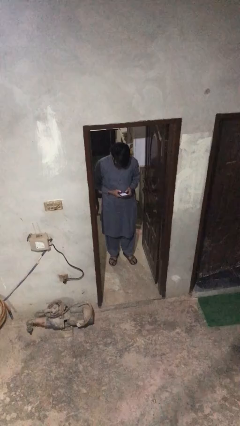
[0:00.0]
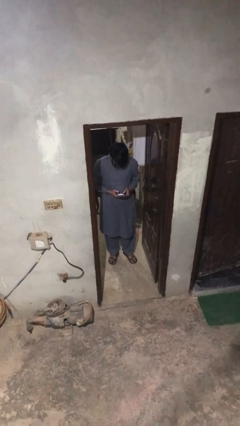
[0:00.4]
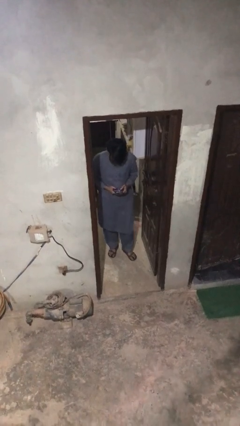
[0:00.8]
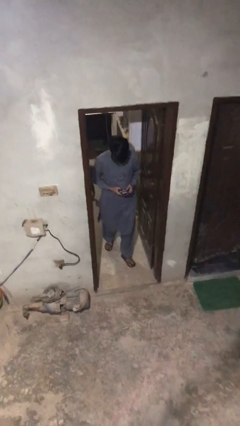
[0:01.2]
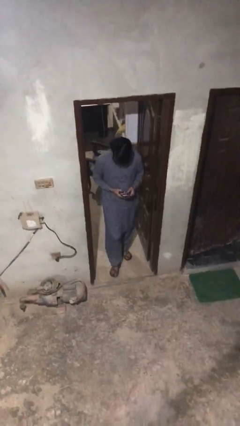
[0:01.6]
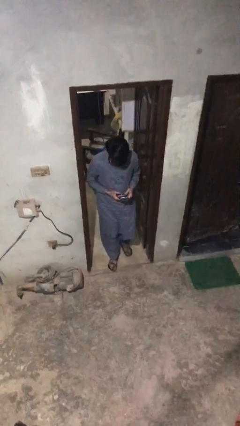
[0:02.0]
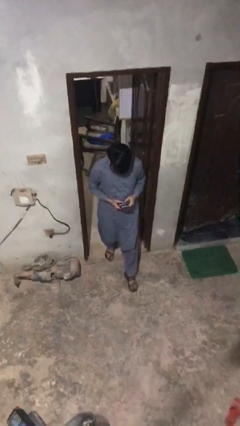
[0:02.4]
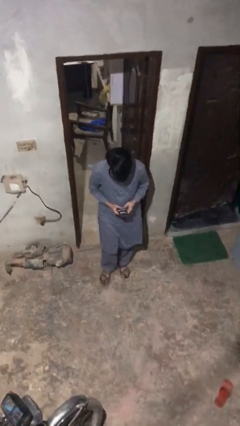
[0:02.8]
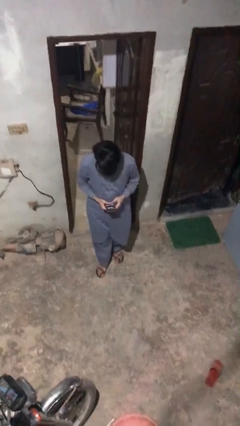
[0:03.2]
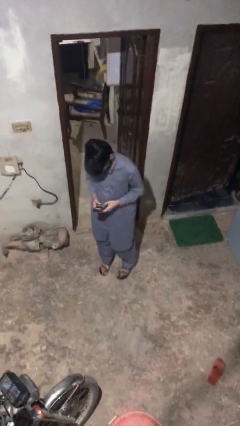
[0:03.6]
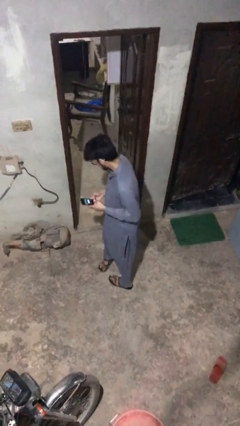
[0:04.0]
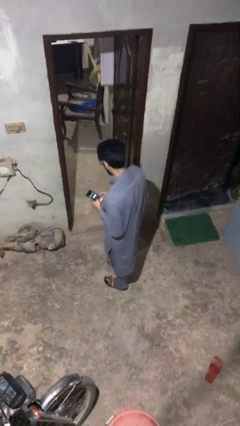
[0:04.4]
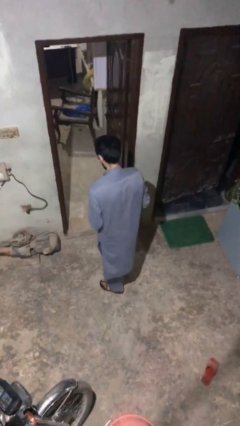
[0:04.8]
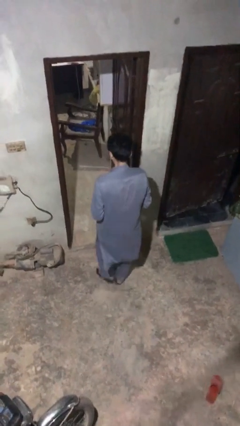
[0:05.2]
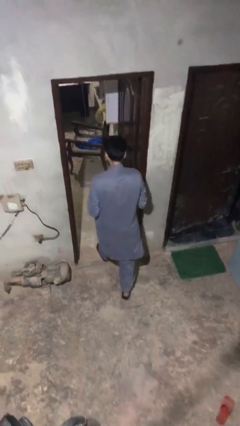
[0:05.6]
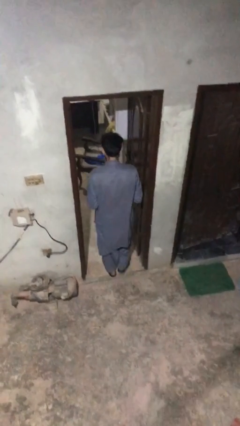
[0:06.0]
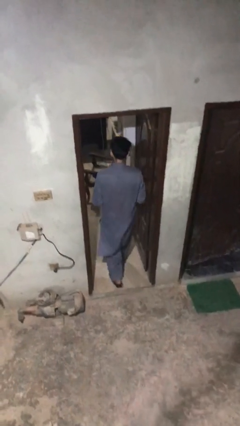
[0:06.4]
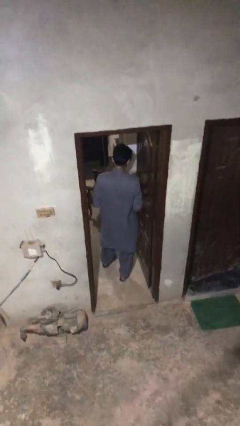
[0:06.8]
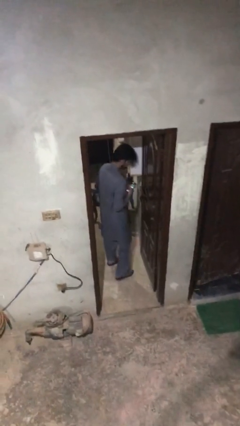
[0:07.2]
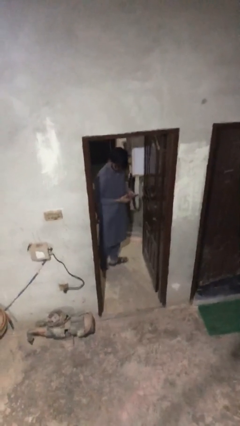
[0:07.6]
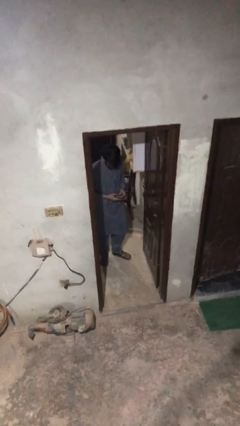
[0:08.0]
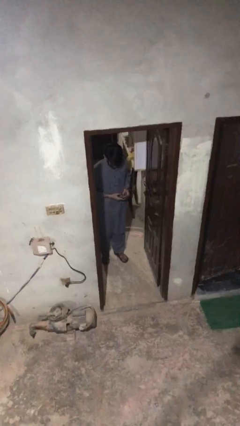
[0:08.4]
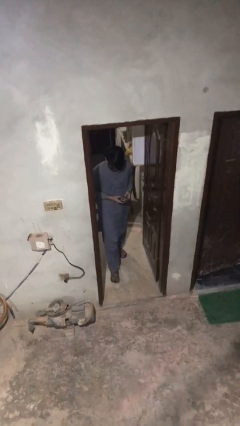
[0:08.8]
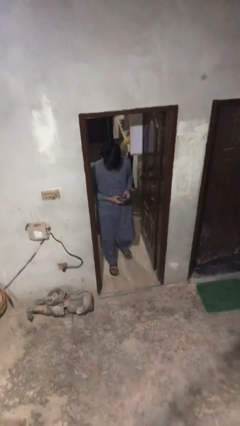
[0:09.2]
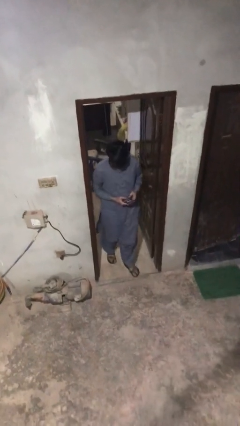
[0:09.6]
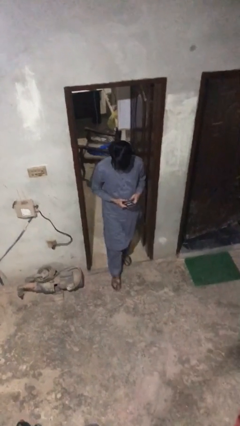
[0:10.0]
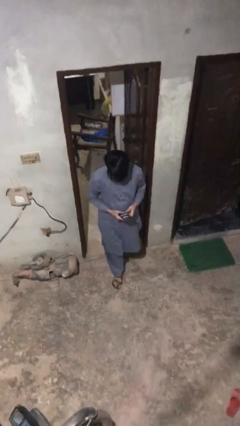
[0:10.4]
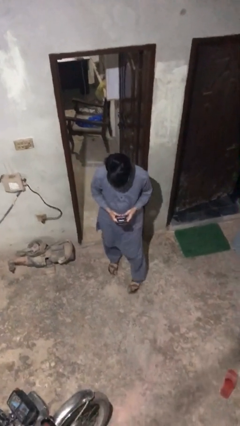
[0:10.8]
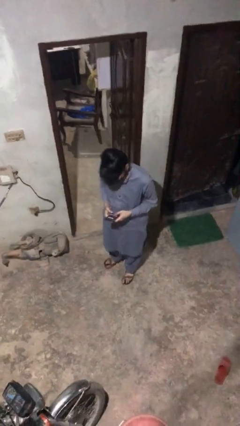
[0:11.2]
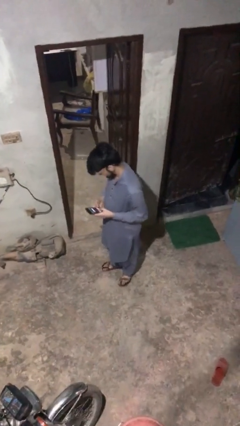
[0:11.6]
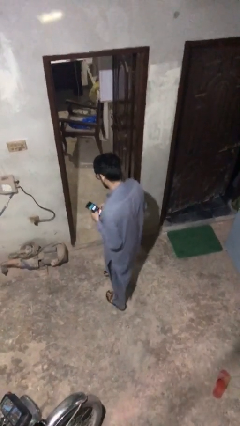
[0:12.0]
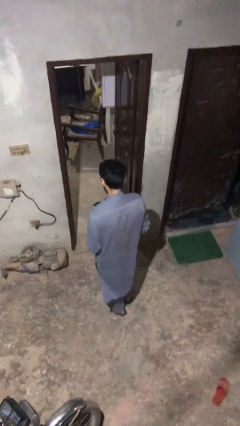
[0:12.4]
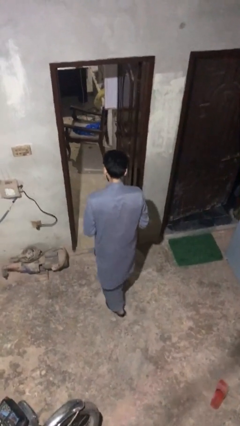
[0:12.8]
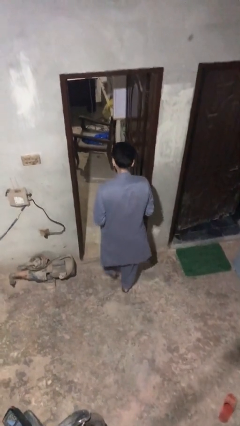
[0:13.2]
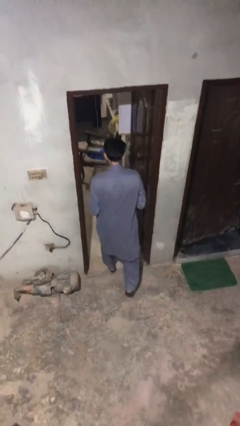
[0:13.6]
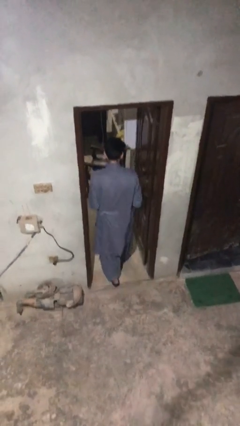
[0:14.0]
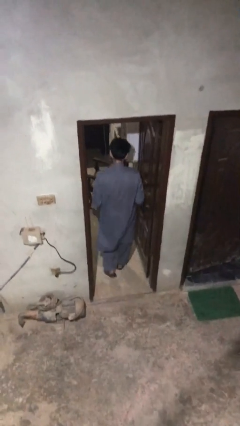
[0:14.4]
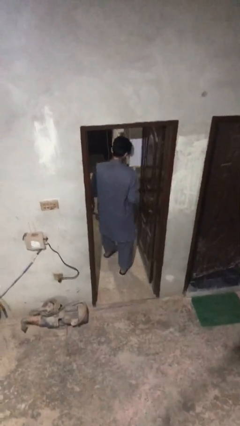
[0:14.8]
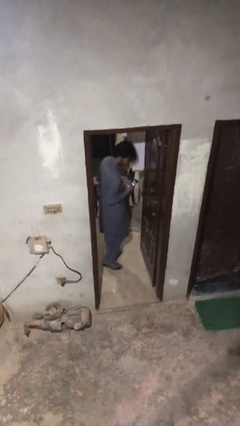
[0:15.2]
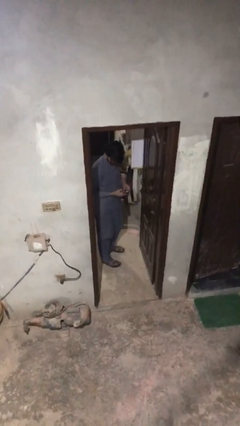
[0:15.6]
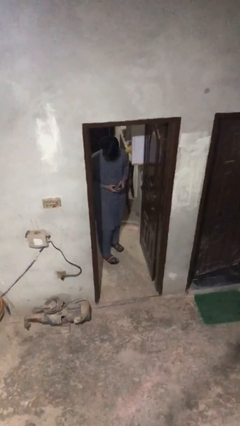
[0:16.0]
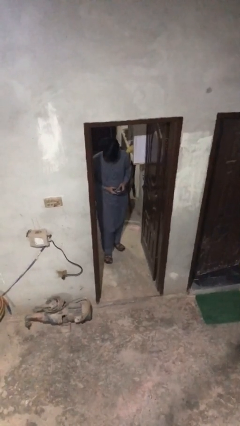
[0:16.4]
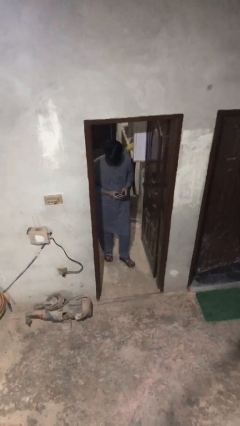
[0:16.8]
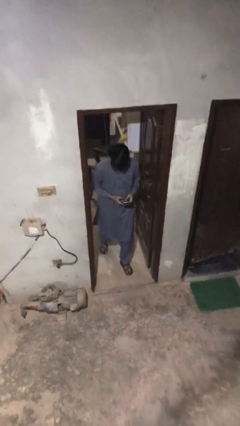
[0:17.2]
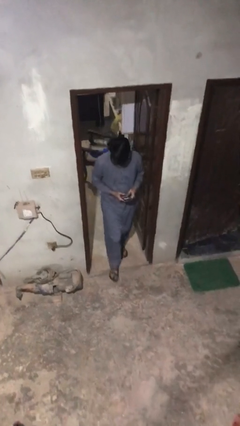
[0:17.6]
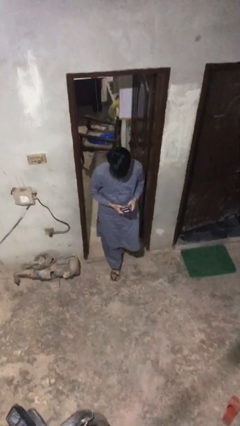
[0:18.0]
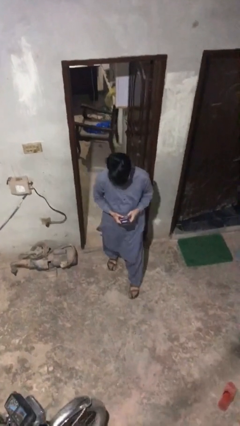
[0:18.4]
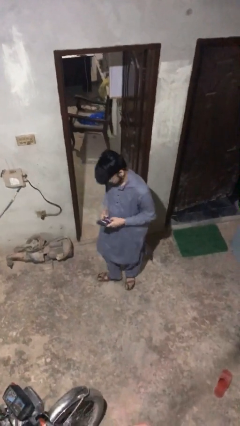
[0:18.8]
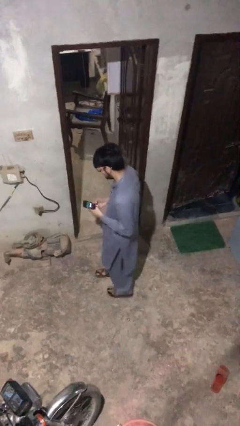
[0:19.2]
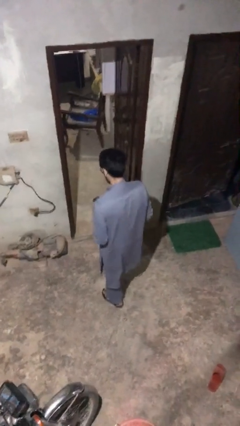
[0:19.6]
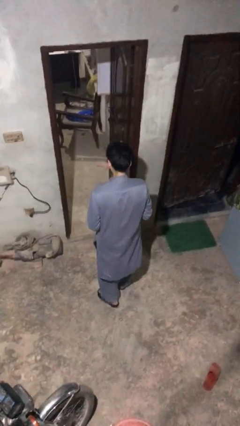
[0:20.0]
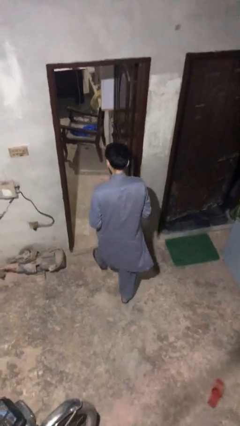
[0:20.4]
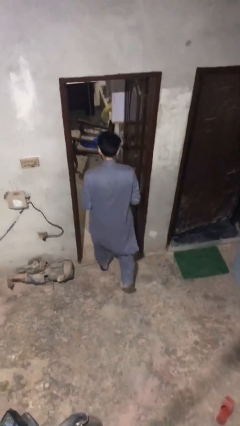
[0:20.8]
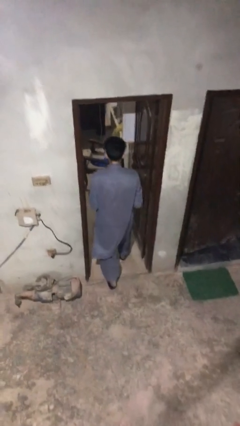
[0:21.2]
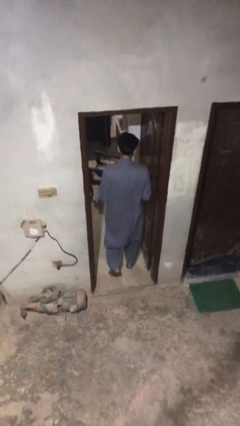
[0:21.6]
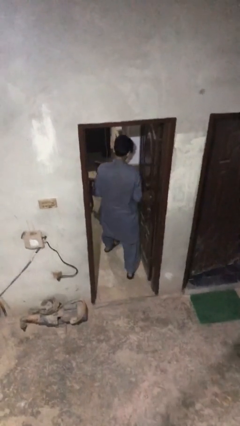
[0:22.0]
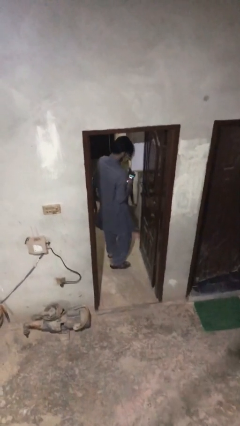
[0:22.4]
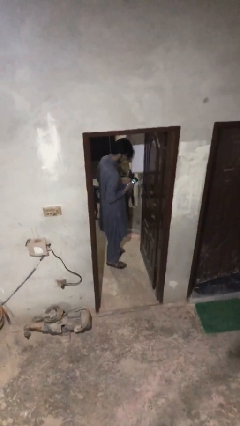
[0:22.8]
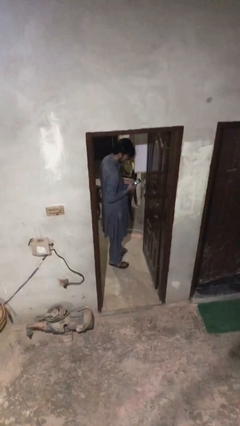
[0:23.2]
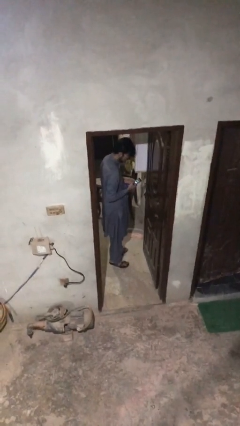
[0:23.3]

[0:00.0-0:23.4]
person texts on phone

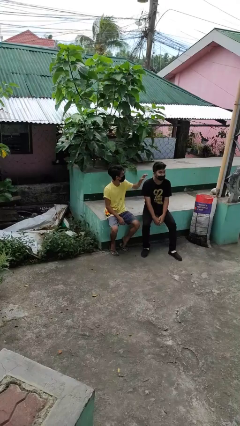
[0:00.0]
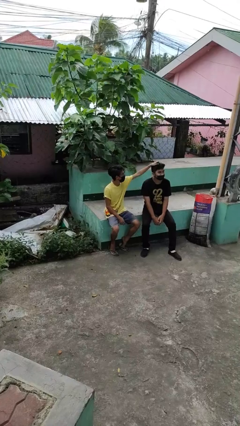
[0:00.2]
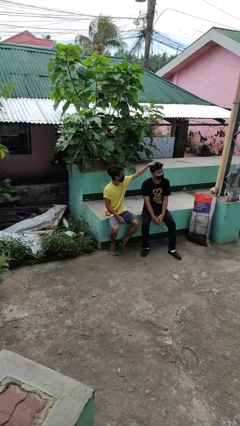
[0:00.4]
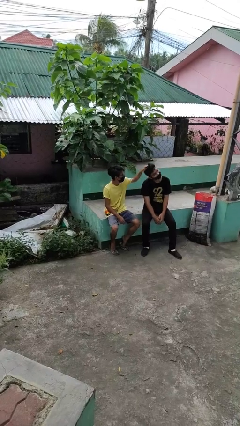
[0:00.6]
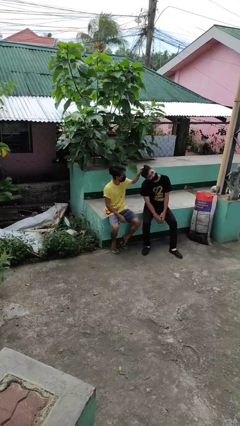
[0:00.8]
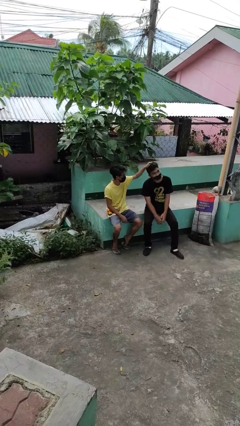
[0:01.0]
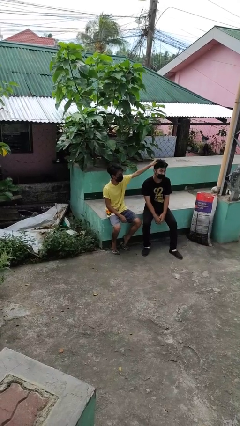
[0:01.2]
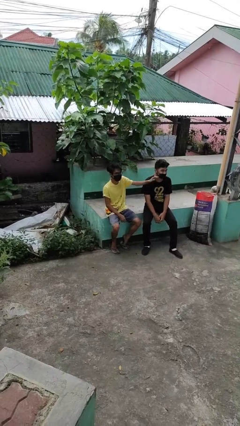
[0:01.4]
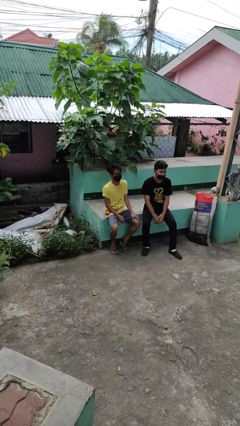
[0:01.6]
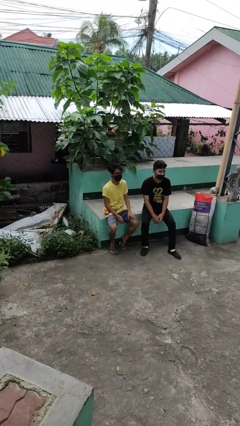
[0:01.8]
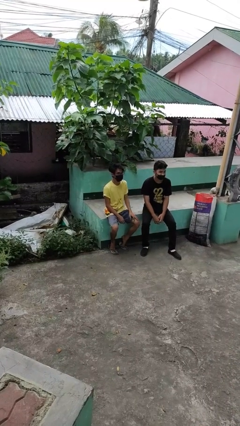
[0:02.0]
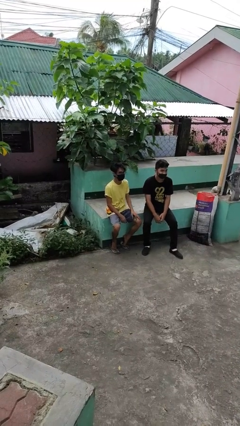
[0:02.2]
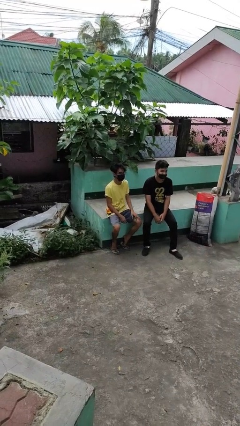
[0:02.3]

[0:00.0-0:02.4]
person grabs person by hair

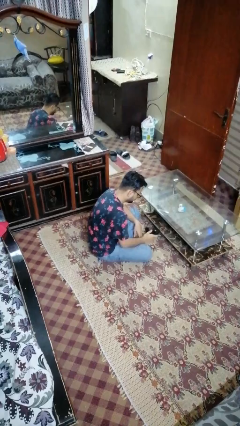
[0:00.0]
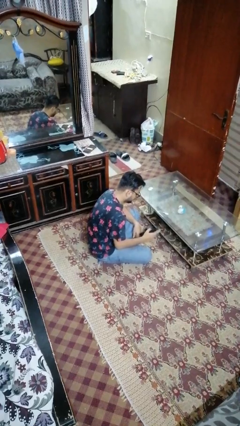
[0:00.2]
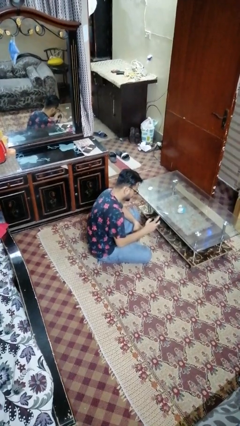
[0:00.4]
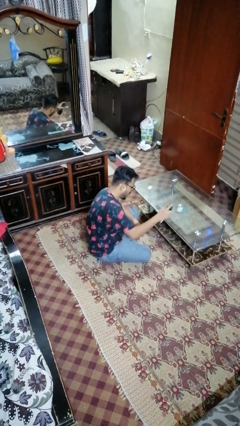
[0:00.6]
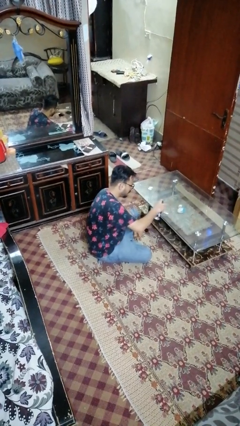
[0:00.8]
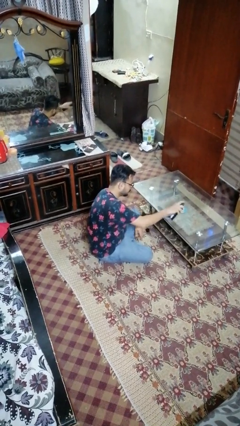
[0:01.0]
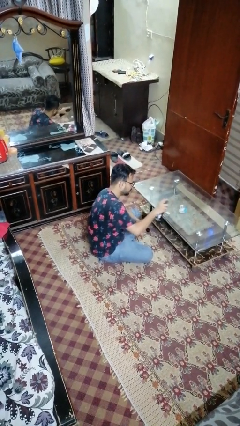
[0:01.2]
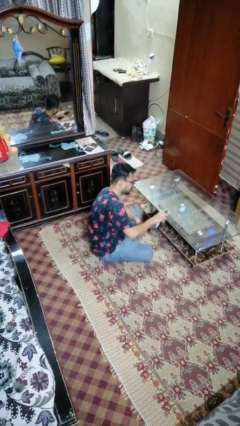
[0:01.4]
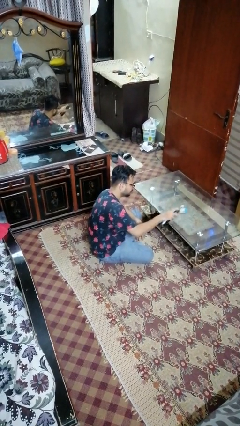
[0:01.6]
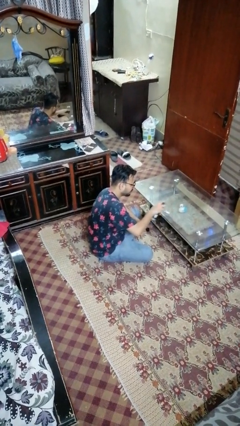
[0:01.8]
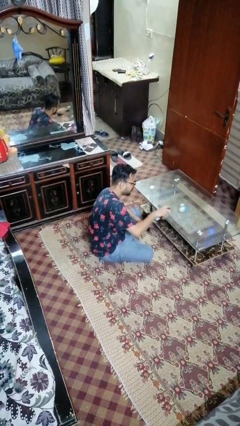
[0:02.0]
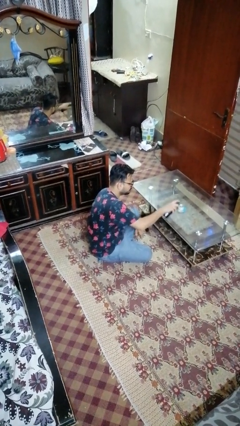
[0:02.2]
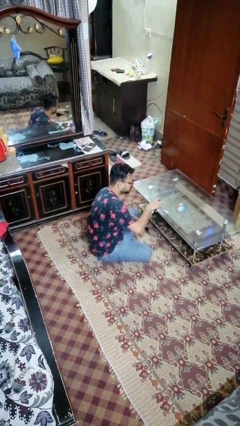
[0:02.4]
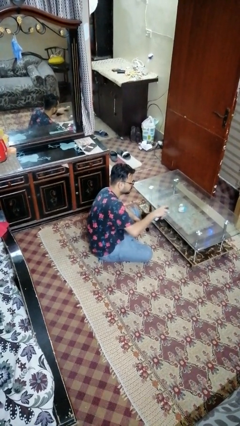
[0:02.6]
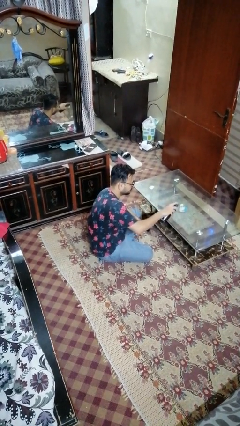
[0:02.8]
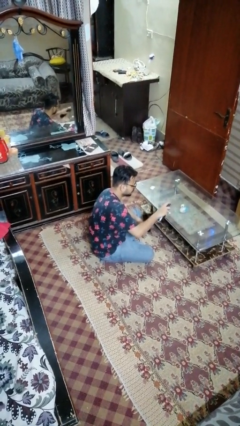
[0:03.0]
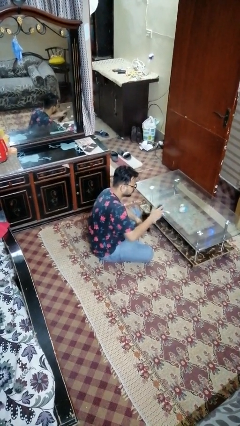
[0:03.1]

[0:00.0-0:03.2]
person sprays from bottle

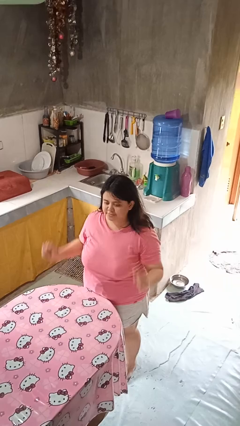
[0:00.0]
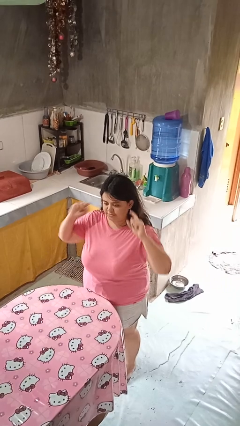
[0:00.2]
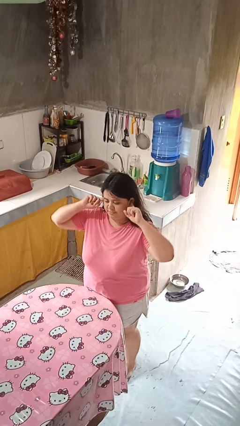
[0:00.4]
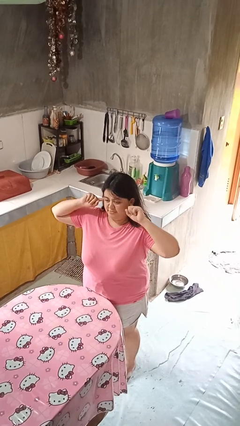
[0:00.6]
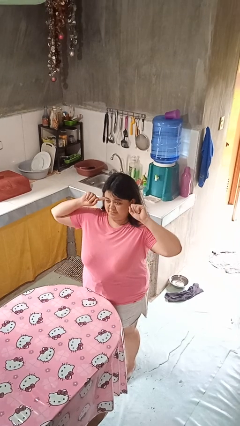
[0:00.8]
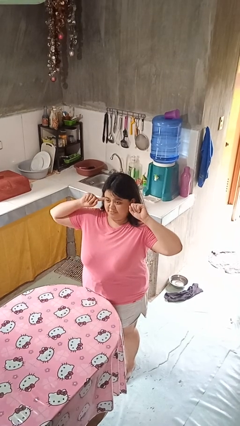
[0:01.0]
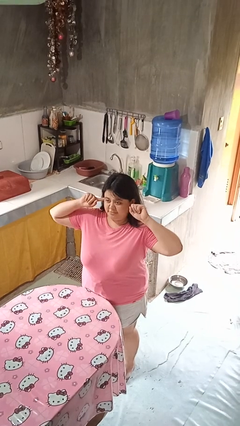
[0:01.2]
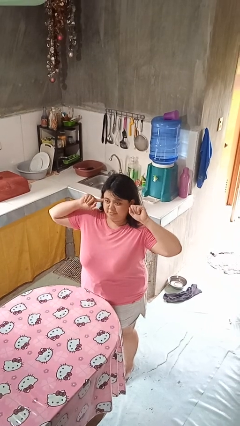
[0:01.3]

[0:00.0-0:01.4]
person puts fingers in ear
